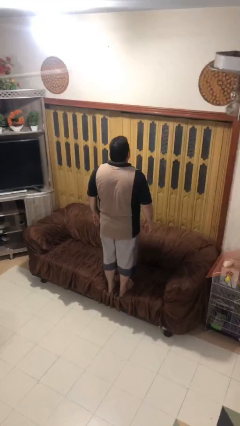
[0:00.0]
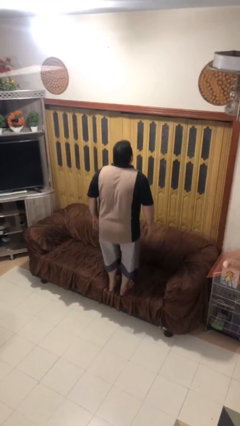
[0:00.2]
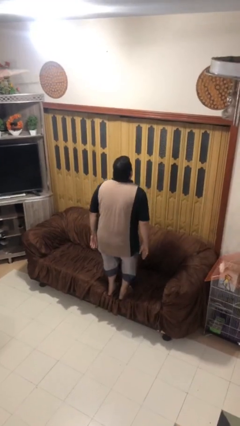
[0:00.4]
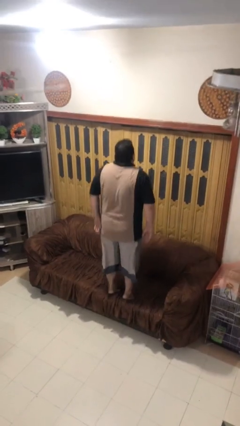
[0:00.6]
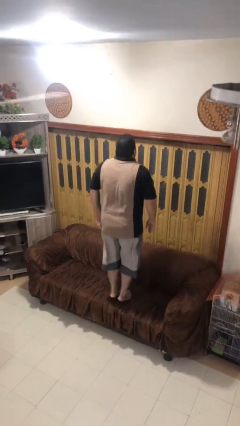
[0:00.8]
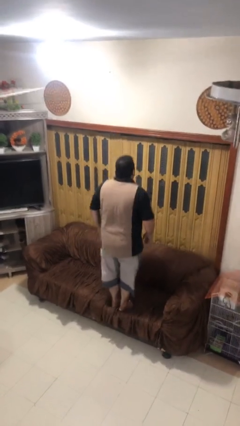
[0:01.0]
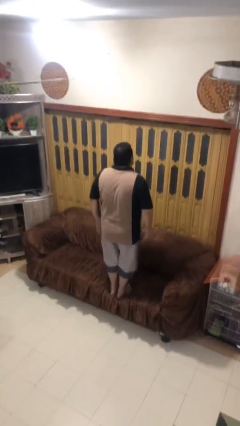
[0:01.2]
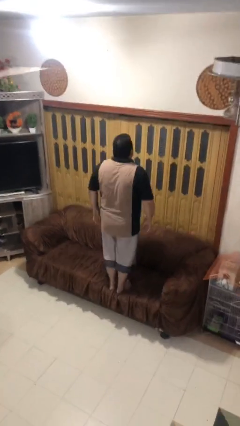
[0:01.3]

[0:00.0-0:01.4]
person jumps on couch

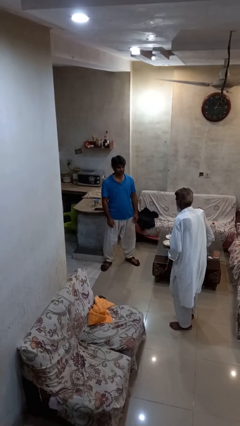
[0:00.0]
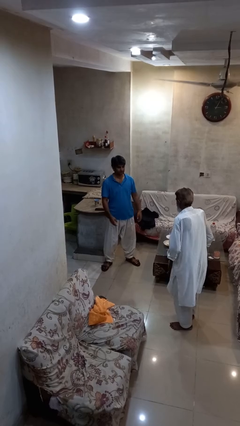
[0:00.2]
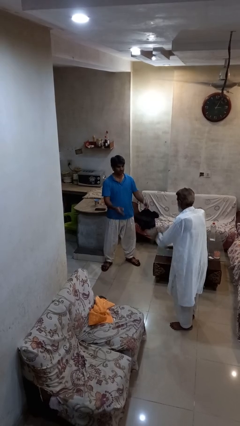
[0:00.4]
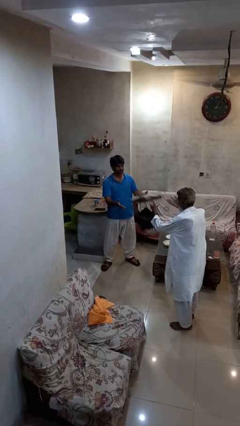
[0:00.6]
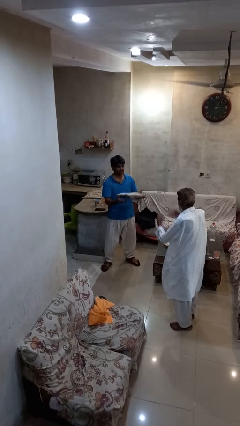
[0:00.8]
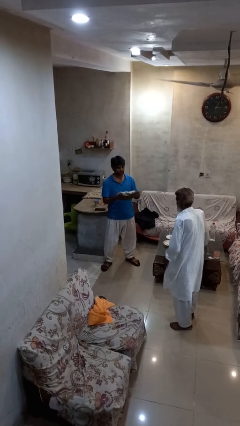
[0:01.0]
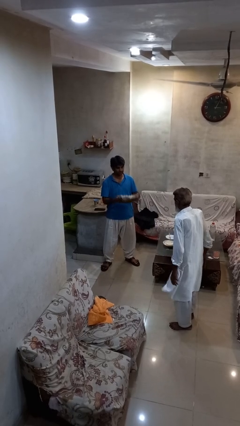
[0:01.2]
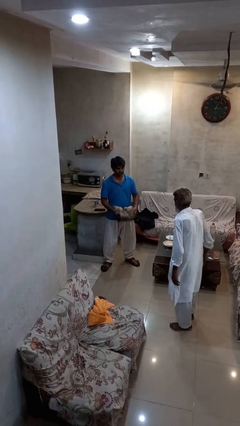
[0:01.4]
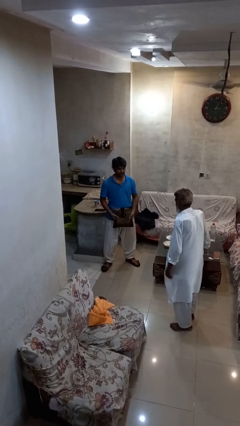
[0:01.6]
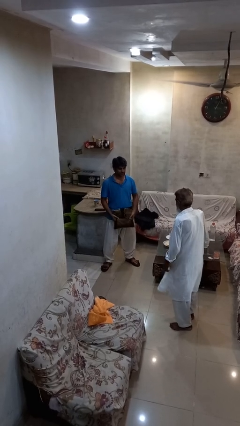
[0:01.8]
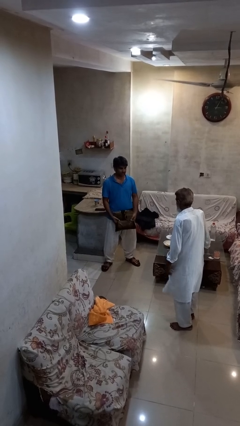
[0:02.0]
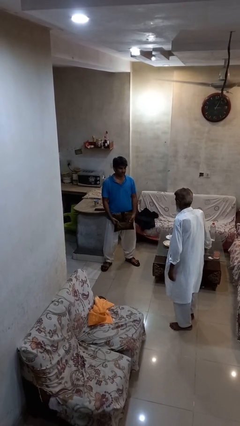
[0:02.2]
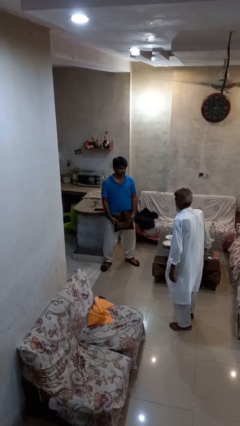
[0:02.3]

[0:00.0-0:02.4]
person catches object from person

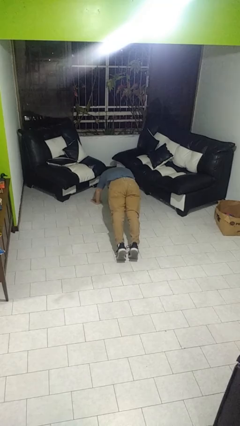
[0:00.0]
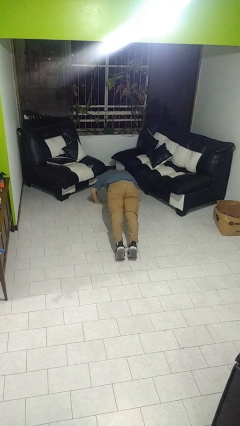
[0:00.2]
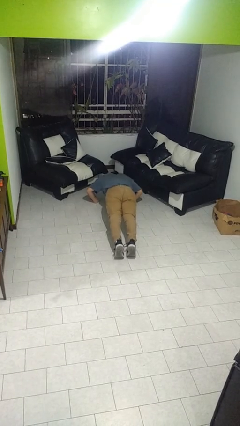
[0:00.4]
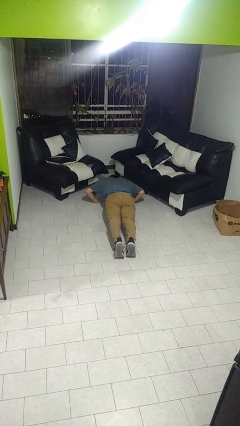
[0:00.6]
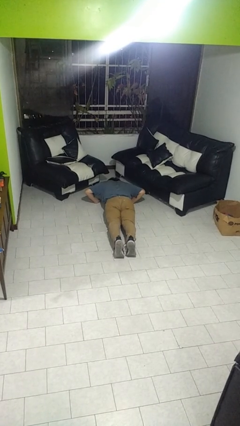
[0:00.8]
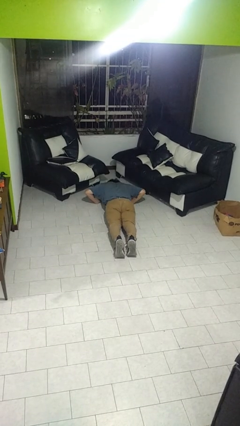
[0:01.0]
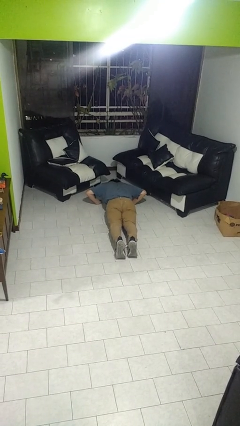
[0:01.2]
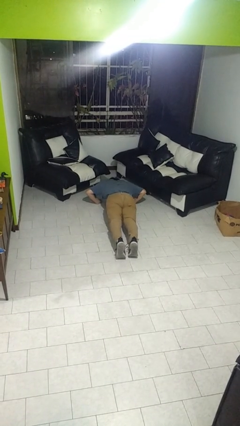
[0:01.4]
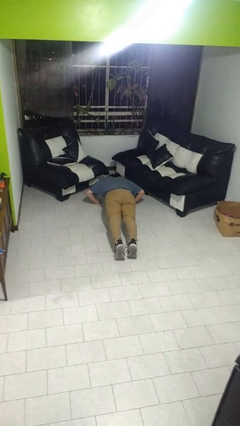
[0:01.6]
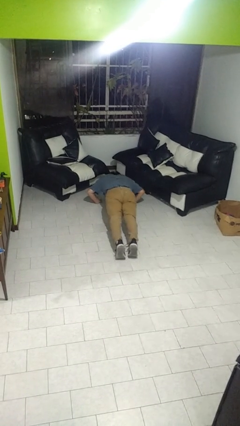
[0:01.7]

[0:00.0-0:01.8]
person exercises with pushup

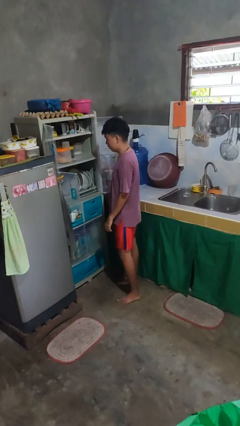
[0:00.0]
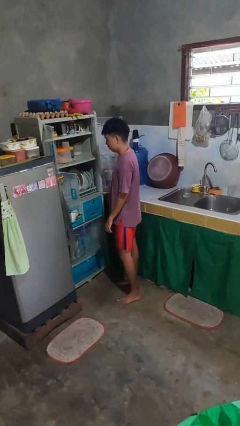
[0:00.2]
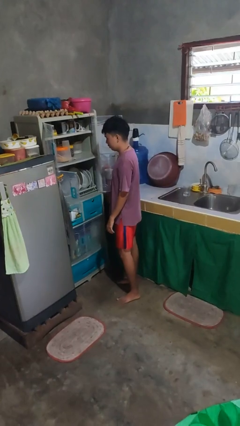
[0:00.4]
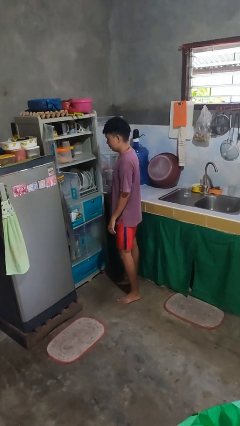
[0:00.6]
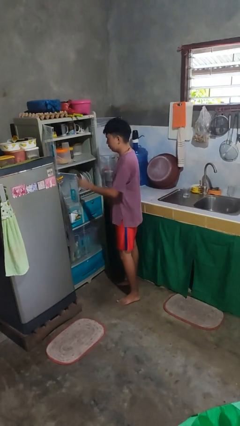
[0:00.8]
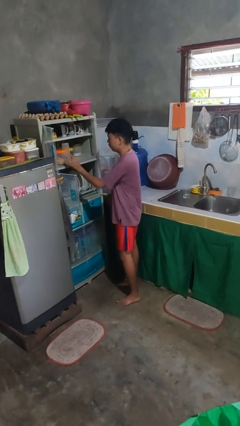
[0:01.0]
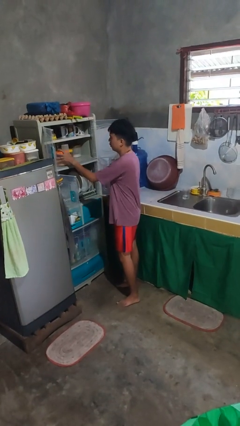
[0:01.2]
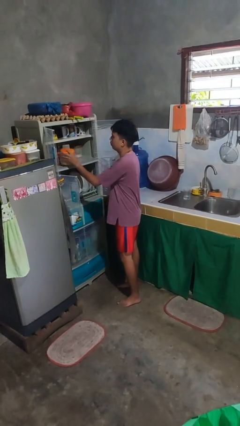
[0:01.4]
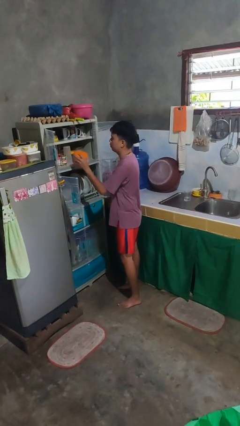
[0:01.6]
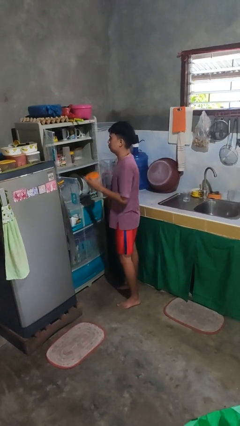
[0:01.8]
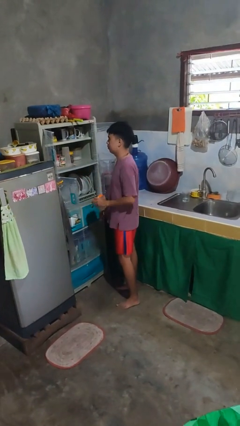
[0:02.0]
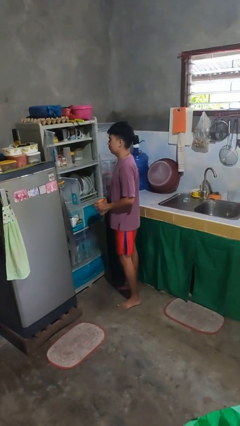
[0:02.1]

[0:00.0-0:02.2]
person takes object from cabinet

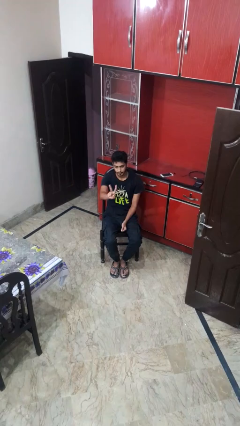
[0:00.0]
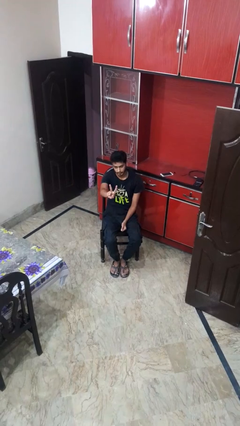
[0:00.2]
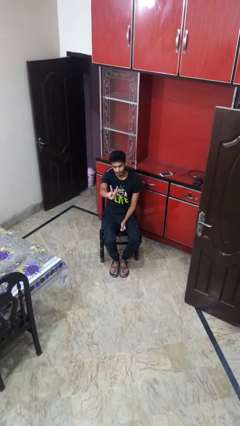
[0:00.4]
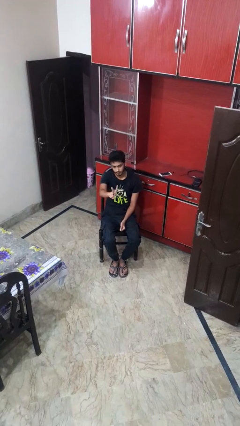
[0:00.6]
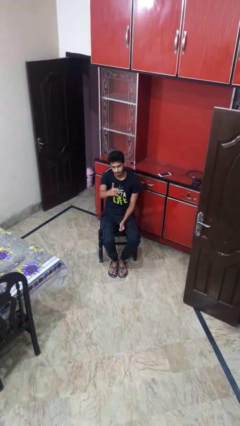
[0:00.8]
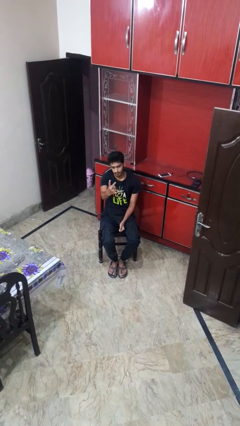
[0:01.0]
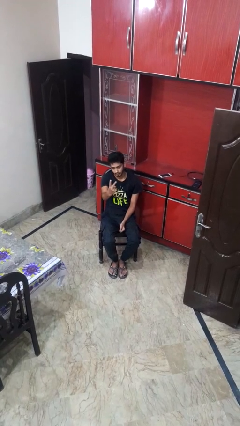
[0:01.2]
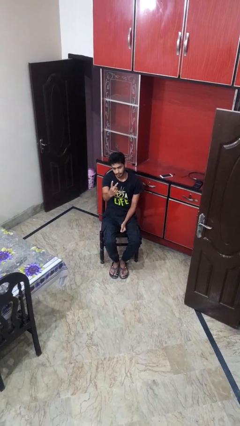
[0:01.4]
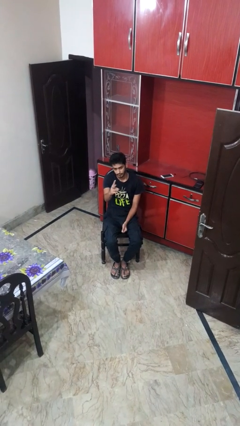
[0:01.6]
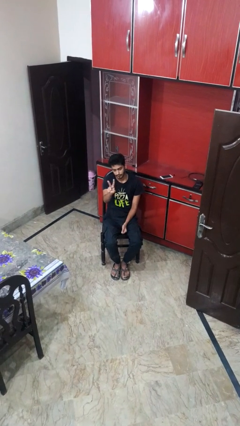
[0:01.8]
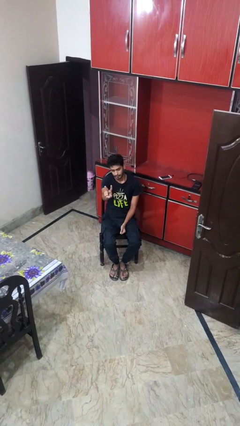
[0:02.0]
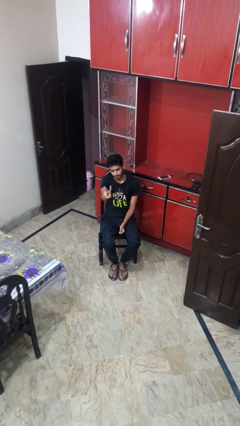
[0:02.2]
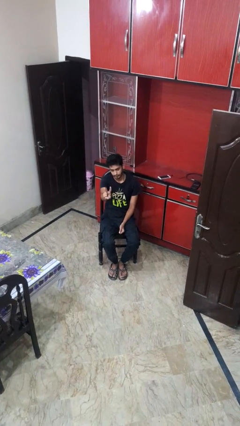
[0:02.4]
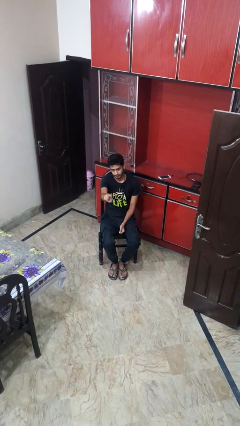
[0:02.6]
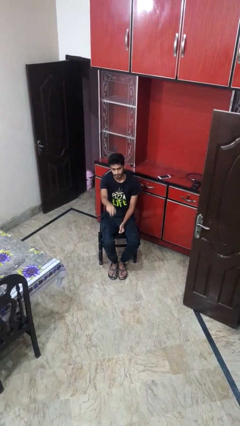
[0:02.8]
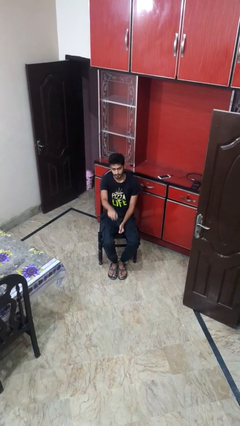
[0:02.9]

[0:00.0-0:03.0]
person gestures peace

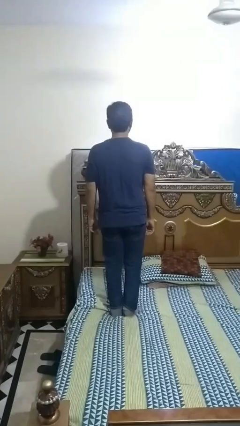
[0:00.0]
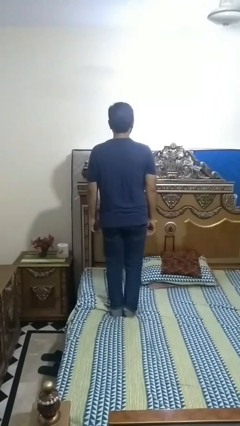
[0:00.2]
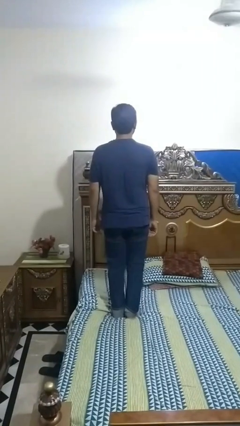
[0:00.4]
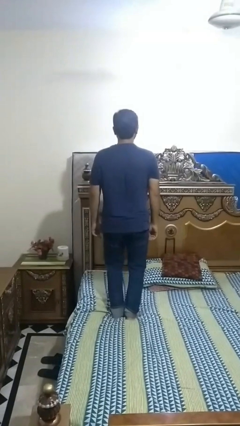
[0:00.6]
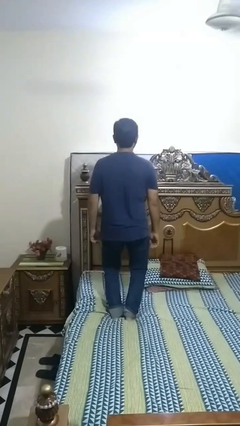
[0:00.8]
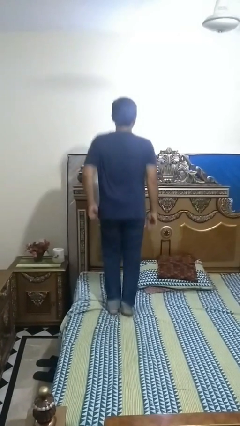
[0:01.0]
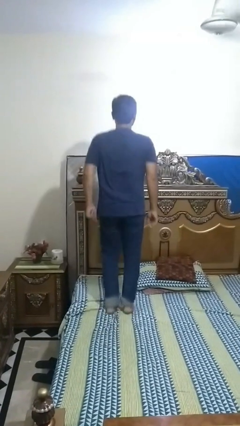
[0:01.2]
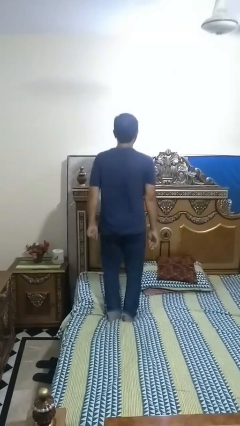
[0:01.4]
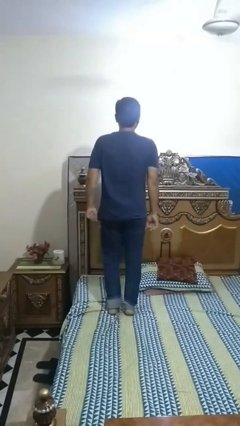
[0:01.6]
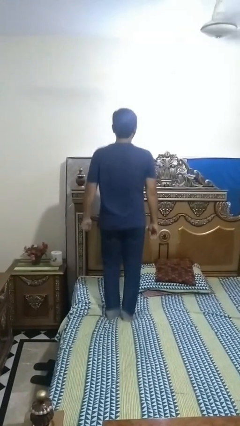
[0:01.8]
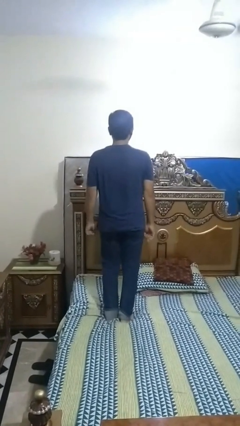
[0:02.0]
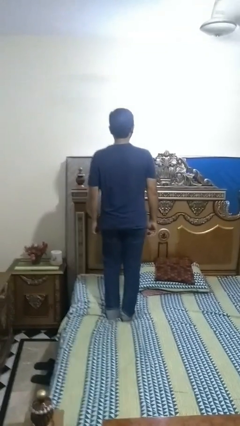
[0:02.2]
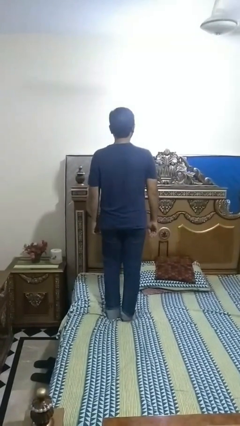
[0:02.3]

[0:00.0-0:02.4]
person jumps on bed

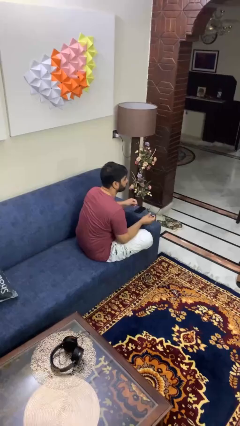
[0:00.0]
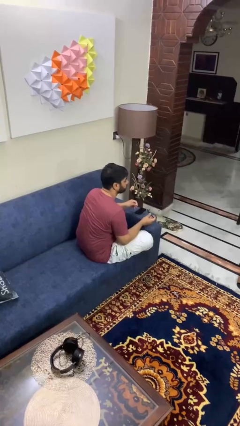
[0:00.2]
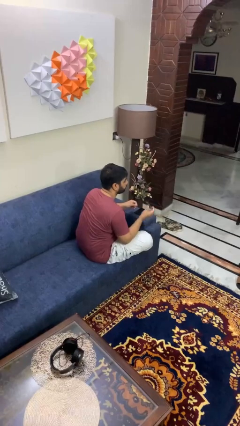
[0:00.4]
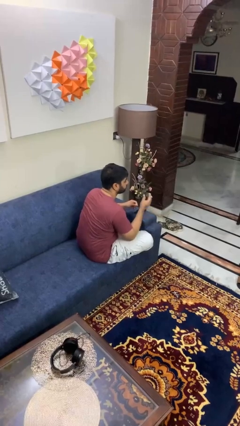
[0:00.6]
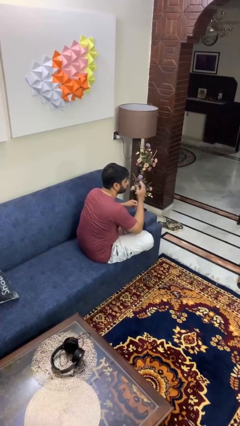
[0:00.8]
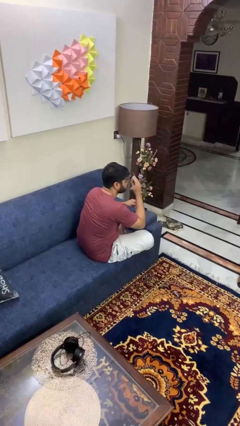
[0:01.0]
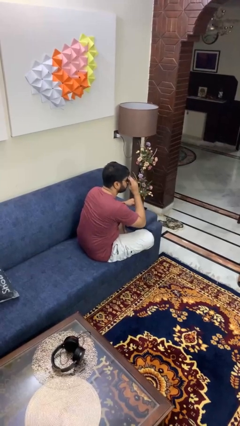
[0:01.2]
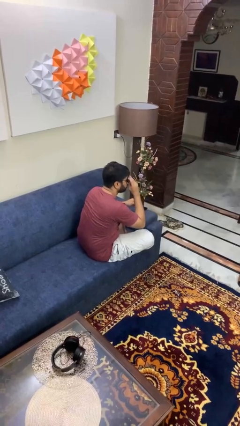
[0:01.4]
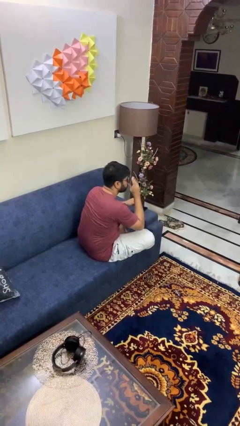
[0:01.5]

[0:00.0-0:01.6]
person puts on glasses

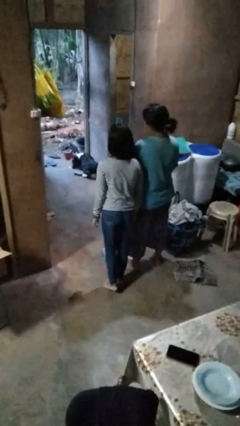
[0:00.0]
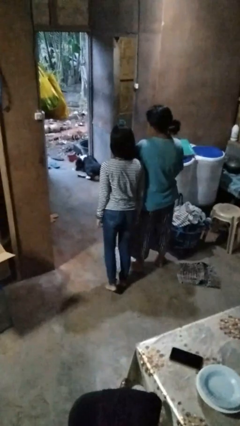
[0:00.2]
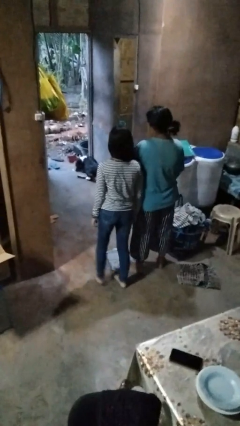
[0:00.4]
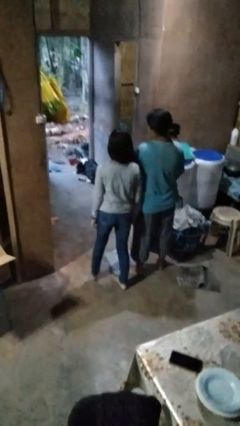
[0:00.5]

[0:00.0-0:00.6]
person bumps into person

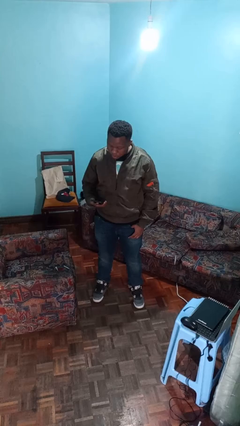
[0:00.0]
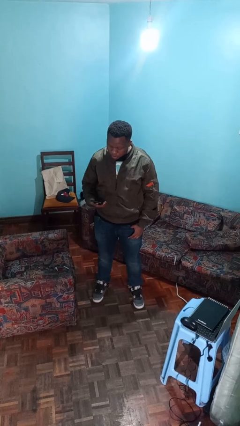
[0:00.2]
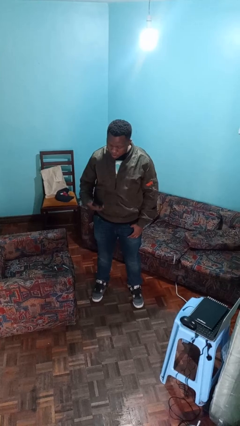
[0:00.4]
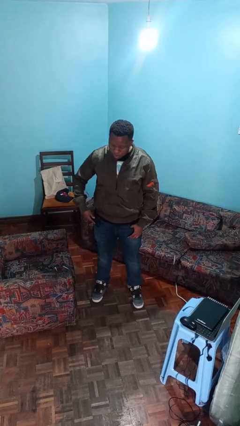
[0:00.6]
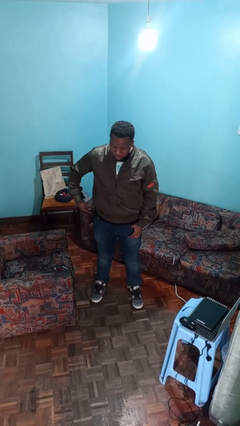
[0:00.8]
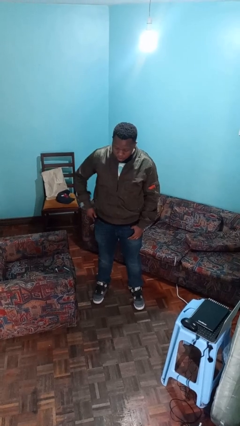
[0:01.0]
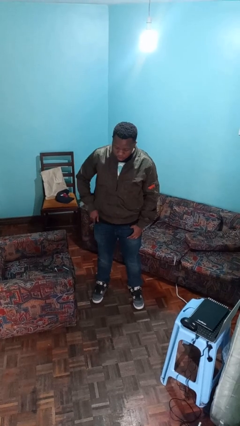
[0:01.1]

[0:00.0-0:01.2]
person puts phone into pocket
